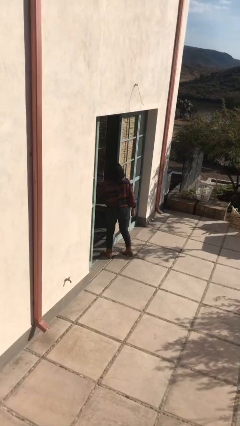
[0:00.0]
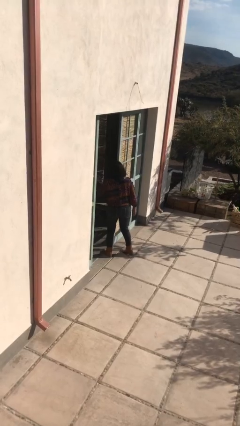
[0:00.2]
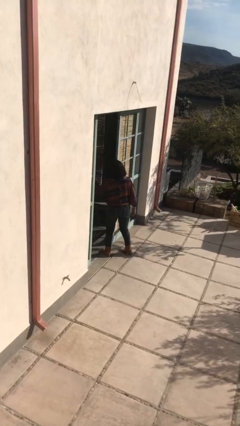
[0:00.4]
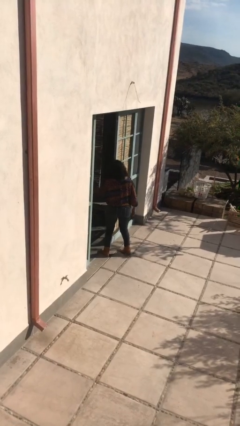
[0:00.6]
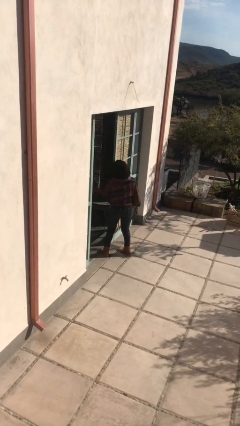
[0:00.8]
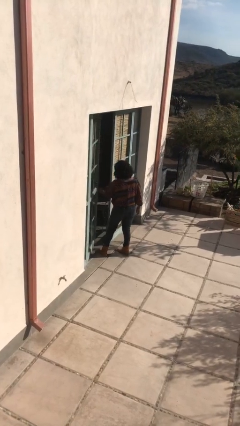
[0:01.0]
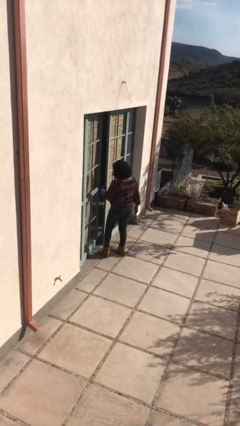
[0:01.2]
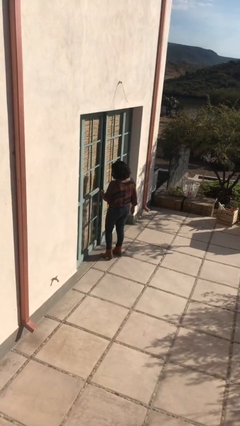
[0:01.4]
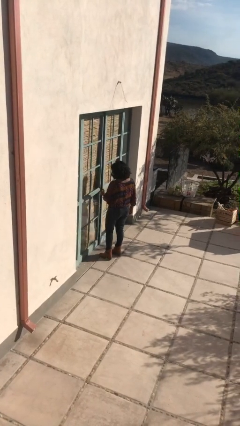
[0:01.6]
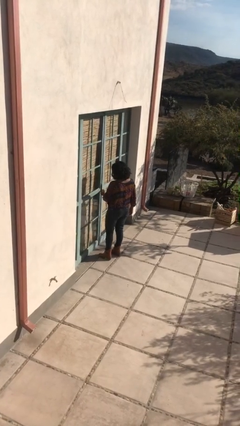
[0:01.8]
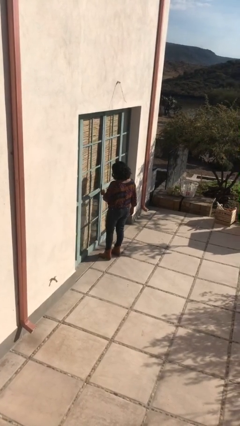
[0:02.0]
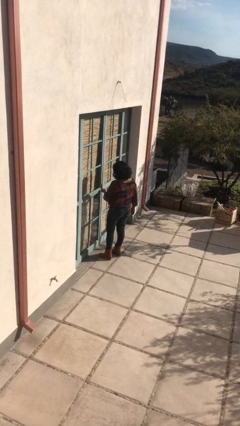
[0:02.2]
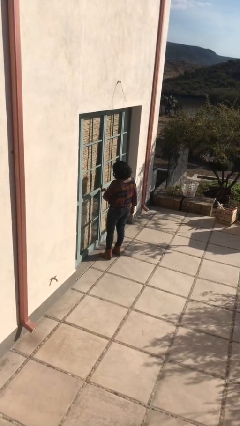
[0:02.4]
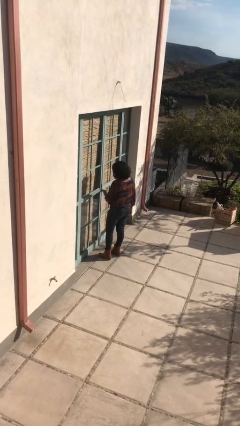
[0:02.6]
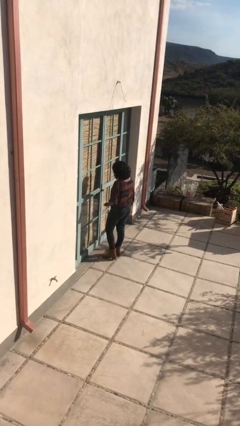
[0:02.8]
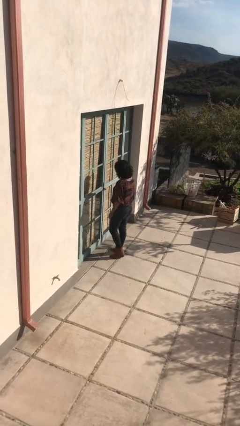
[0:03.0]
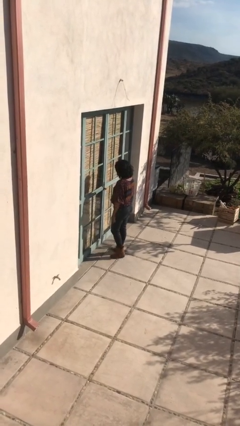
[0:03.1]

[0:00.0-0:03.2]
person closes facility door

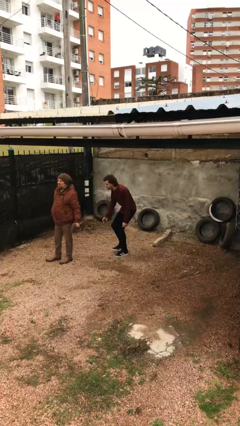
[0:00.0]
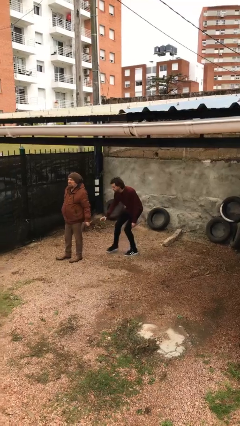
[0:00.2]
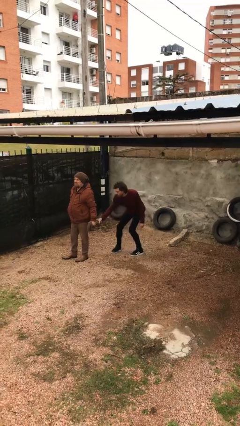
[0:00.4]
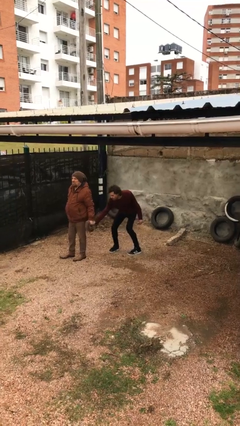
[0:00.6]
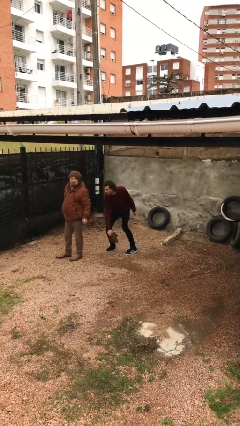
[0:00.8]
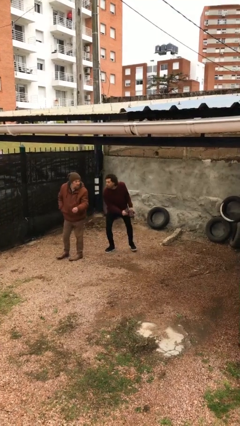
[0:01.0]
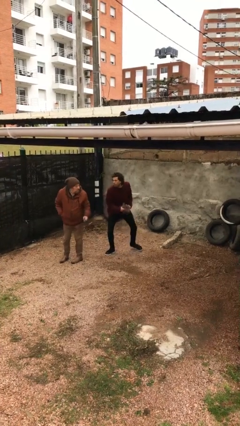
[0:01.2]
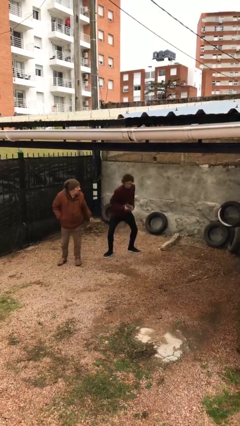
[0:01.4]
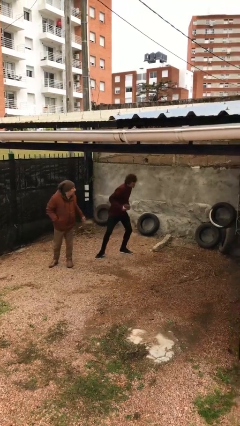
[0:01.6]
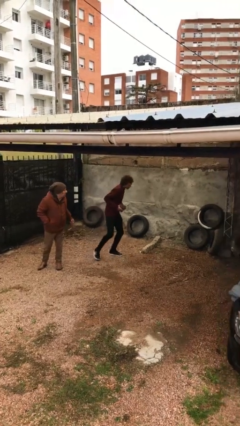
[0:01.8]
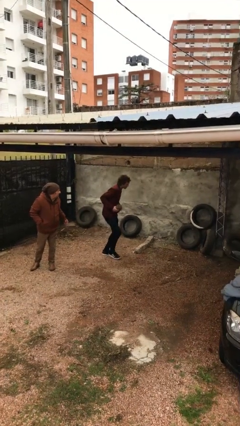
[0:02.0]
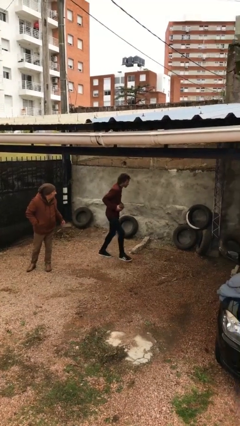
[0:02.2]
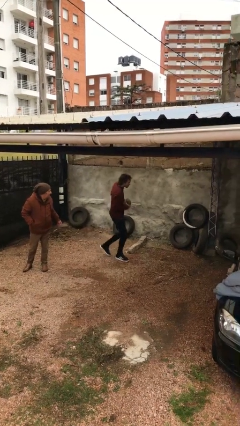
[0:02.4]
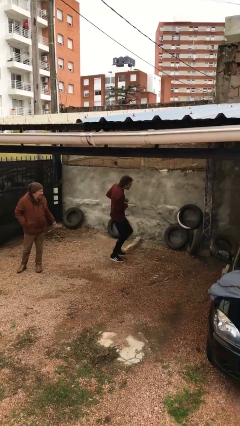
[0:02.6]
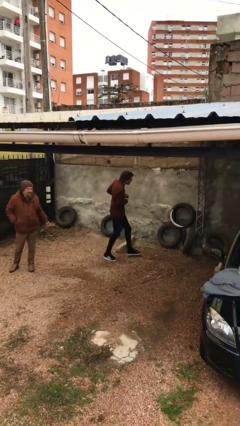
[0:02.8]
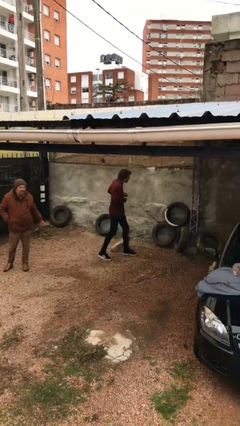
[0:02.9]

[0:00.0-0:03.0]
person steals object from person

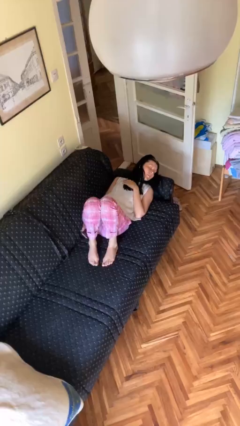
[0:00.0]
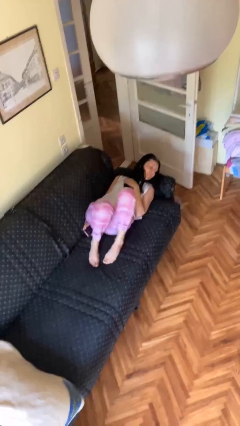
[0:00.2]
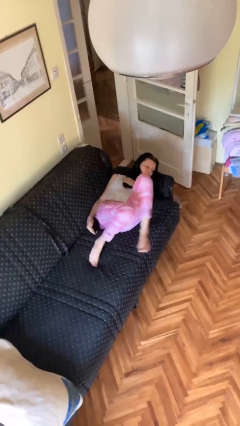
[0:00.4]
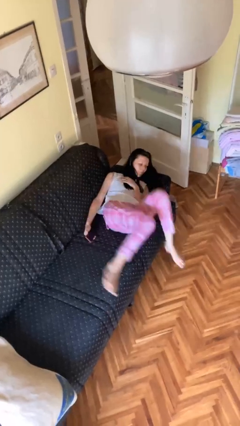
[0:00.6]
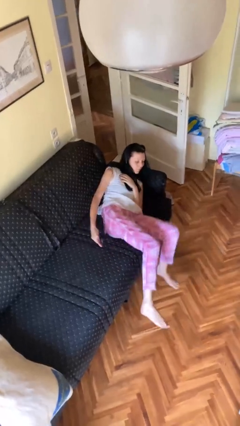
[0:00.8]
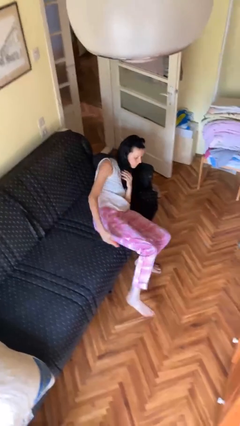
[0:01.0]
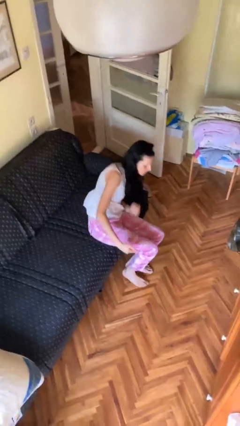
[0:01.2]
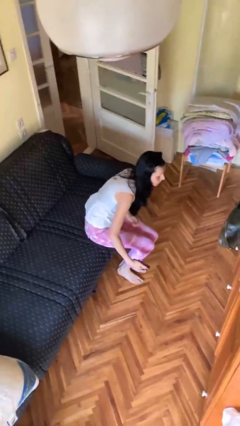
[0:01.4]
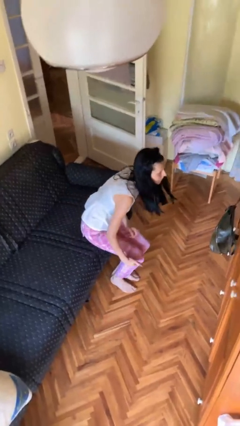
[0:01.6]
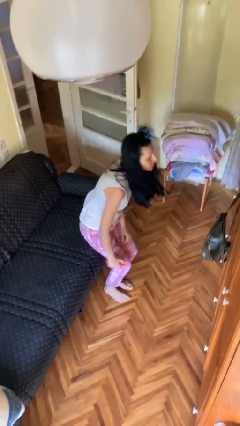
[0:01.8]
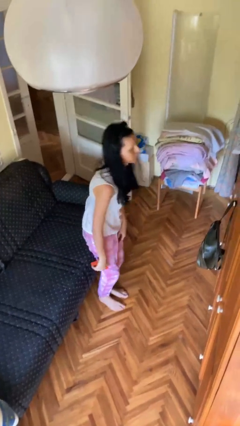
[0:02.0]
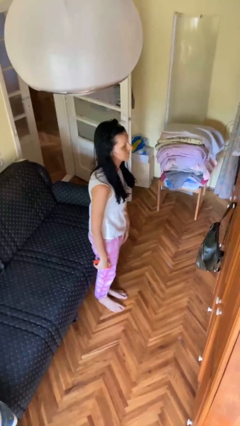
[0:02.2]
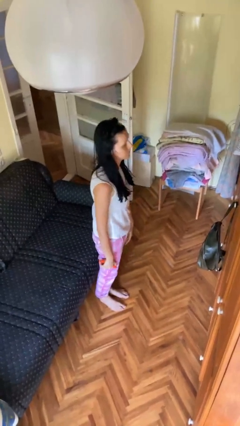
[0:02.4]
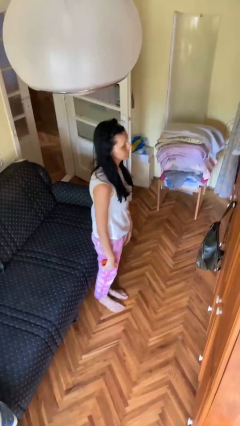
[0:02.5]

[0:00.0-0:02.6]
person stands up

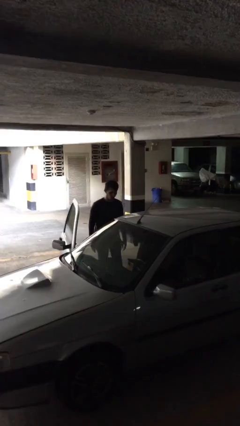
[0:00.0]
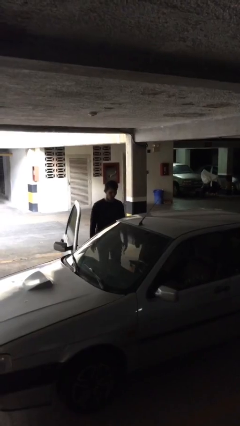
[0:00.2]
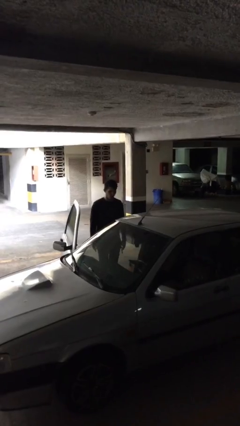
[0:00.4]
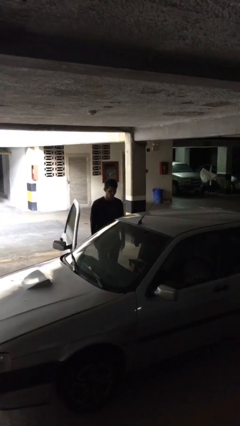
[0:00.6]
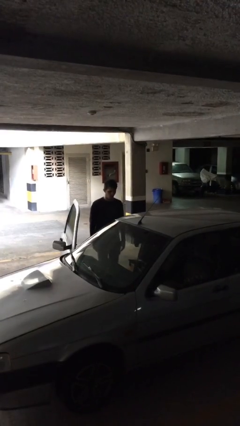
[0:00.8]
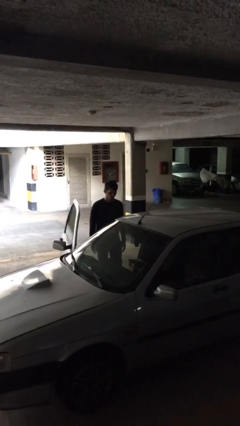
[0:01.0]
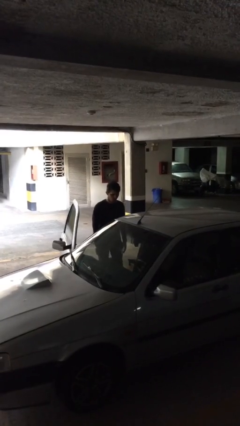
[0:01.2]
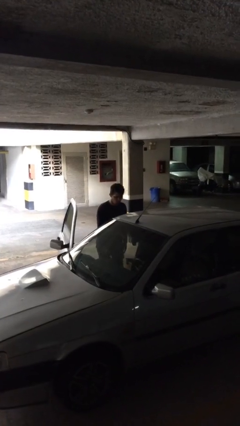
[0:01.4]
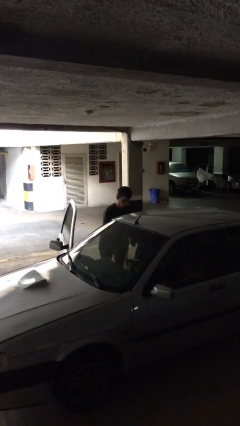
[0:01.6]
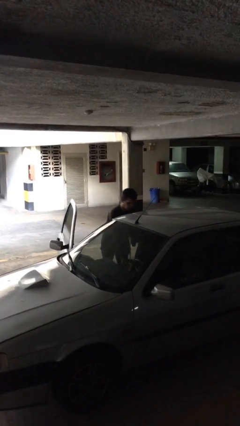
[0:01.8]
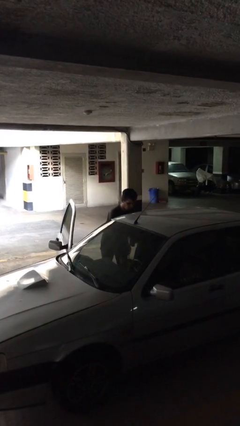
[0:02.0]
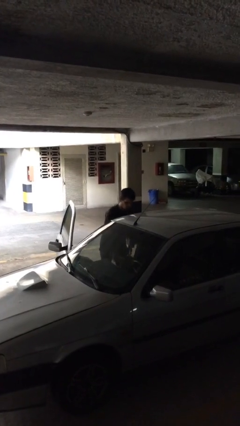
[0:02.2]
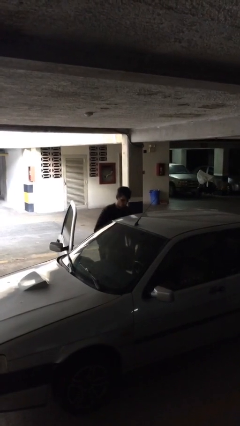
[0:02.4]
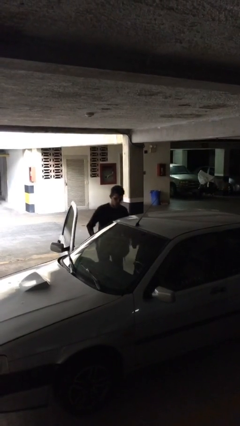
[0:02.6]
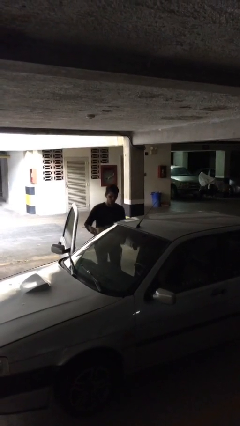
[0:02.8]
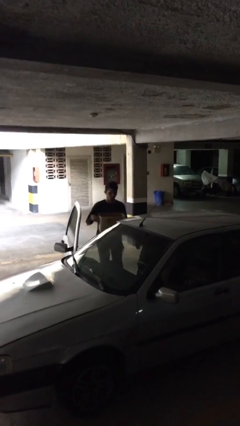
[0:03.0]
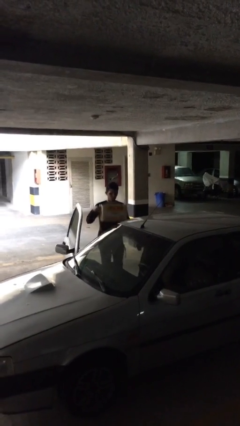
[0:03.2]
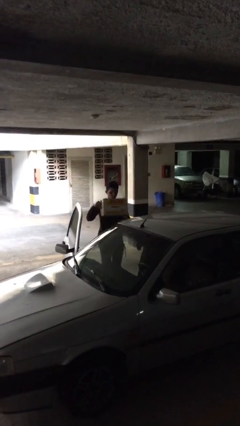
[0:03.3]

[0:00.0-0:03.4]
person unloads car

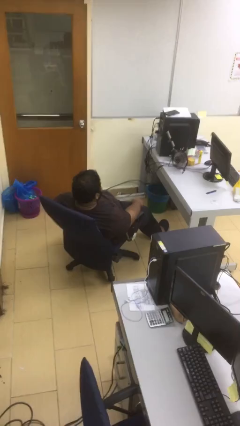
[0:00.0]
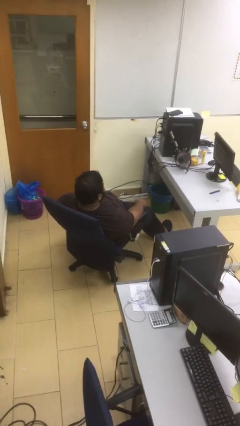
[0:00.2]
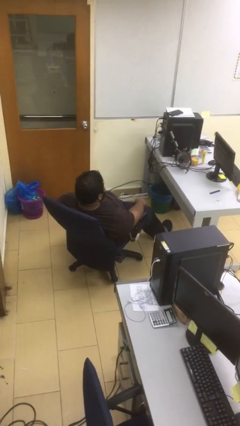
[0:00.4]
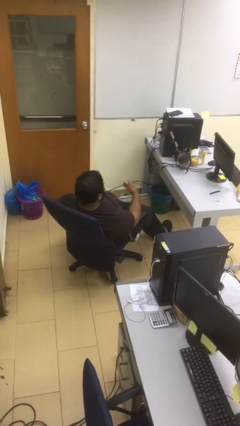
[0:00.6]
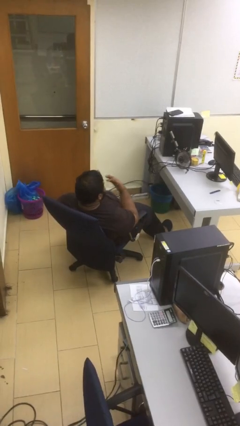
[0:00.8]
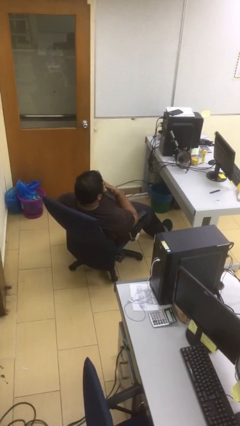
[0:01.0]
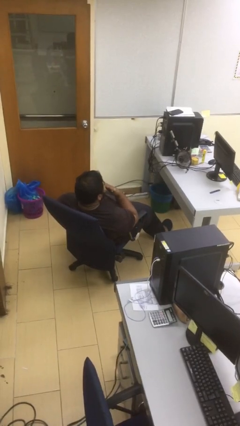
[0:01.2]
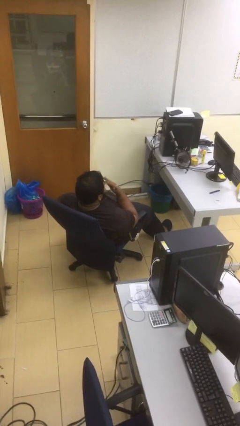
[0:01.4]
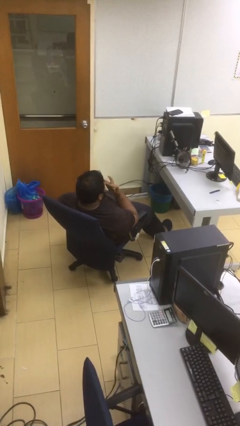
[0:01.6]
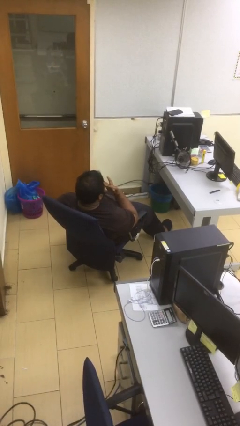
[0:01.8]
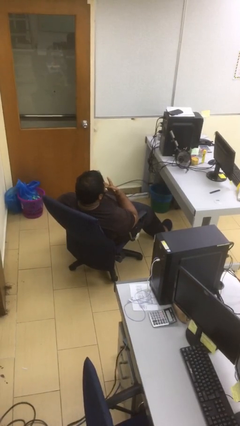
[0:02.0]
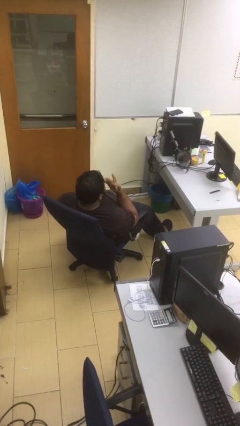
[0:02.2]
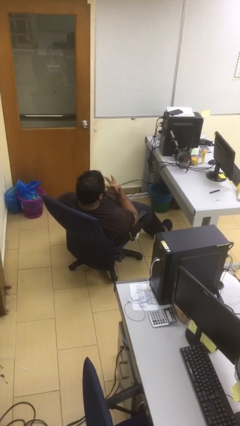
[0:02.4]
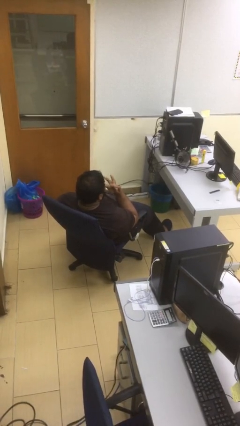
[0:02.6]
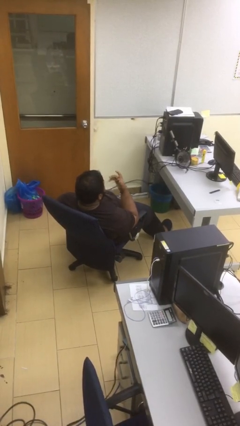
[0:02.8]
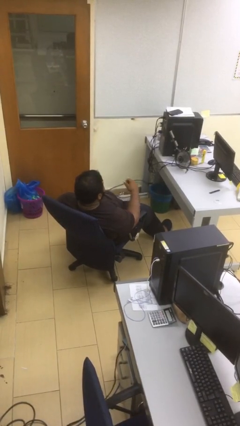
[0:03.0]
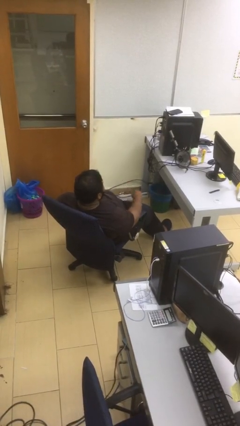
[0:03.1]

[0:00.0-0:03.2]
person licks fingers

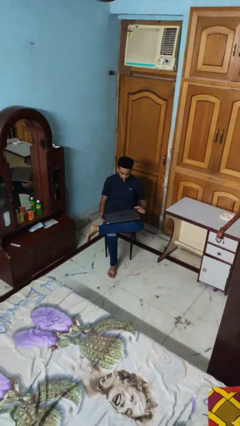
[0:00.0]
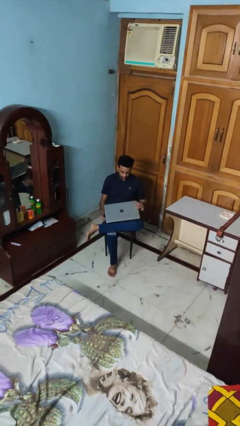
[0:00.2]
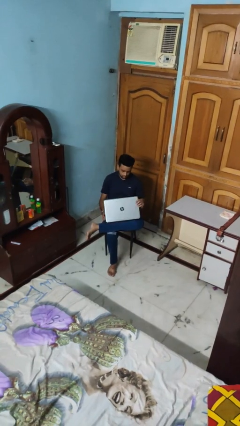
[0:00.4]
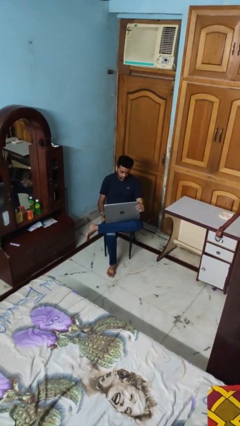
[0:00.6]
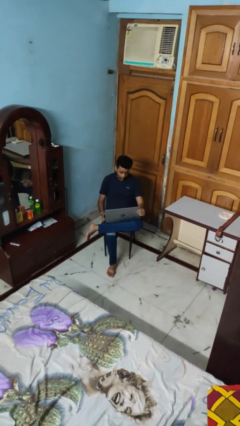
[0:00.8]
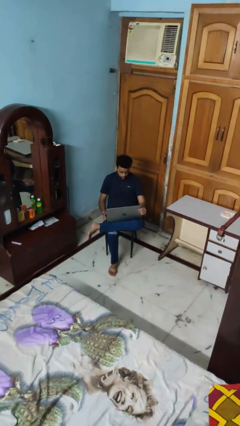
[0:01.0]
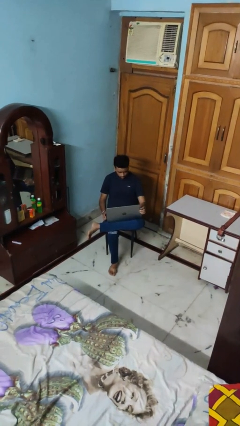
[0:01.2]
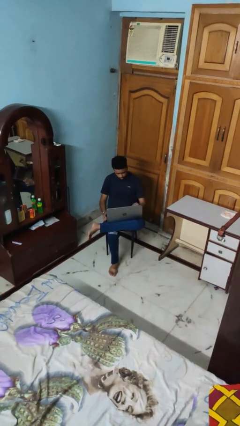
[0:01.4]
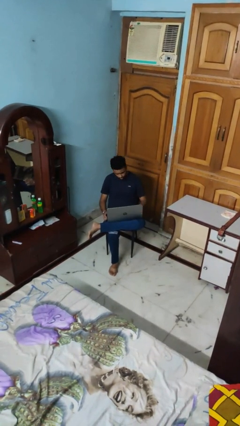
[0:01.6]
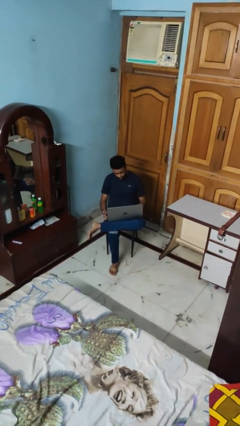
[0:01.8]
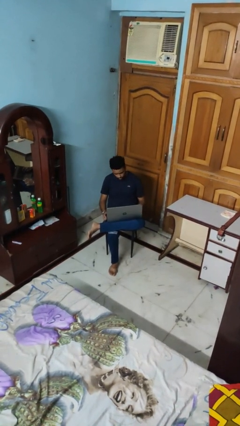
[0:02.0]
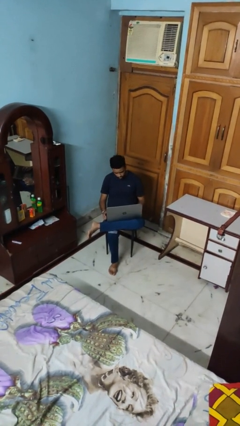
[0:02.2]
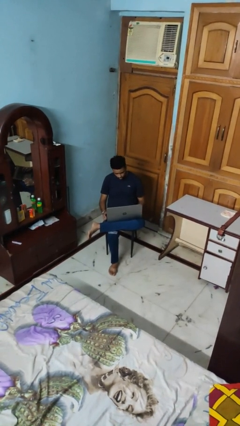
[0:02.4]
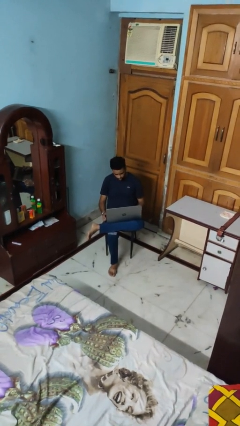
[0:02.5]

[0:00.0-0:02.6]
person opens laptop
